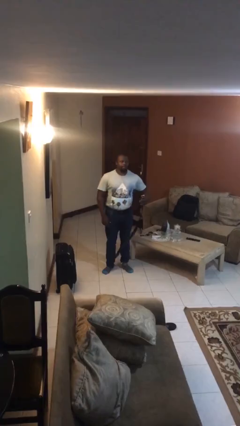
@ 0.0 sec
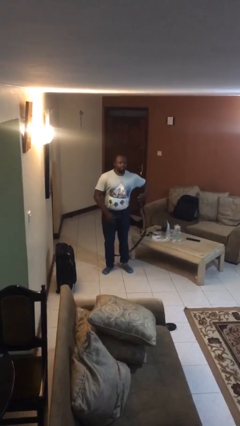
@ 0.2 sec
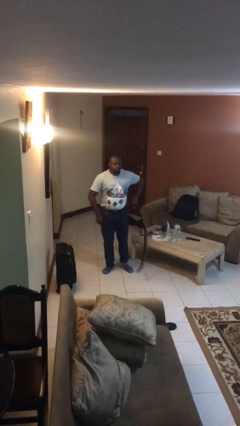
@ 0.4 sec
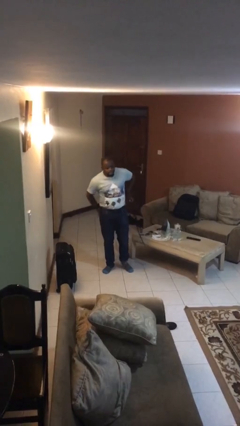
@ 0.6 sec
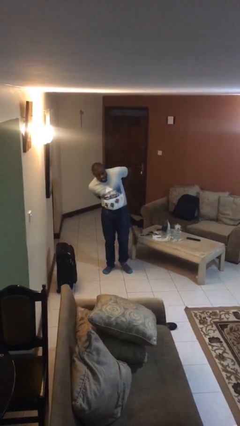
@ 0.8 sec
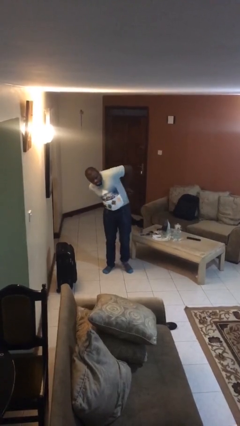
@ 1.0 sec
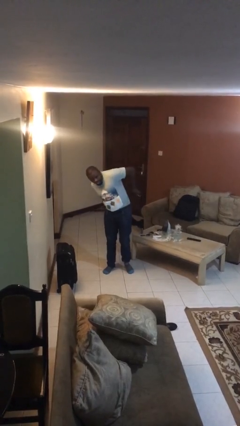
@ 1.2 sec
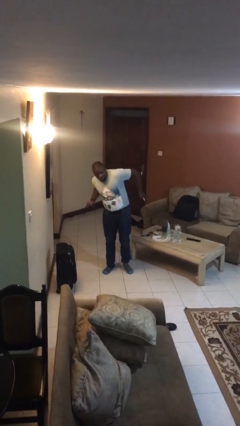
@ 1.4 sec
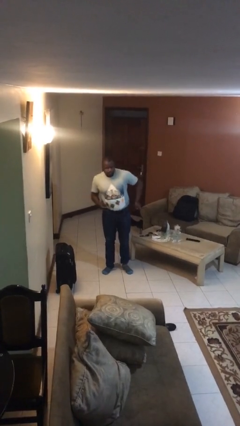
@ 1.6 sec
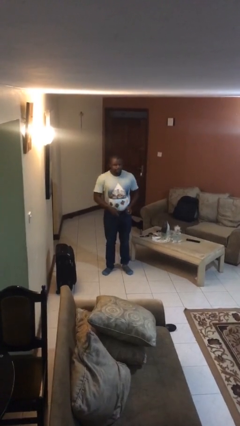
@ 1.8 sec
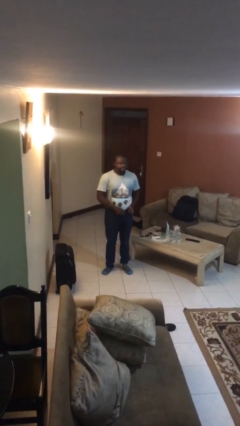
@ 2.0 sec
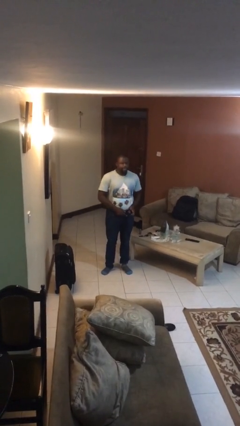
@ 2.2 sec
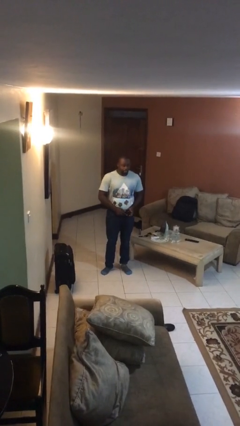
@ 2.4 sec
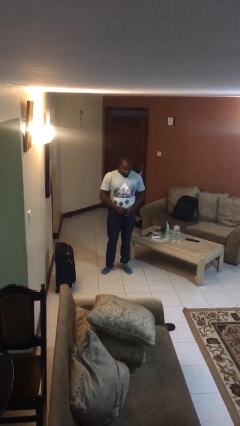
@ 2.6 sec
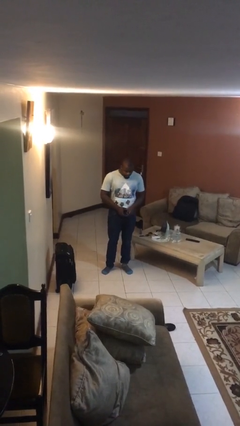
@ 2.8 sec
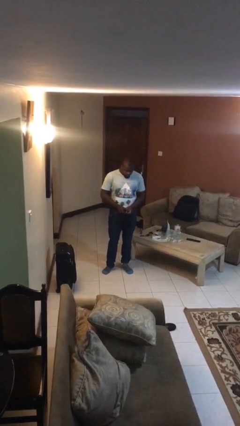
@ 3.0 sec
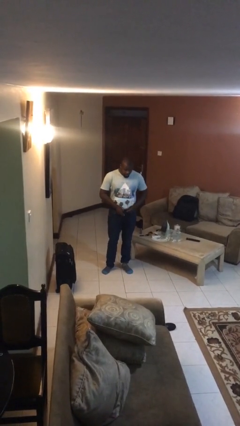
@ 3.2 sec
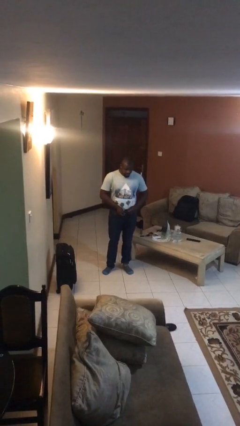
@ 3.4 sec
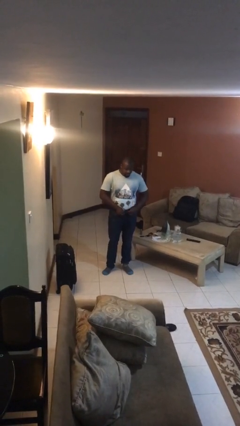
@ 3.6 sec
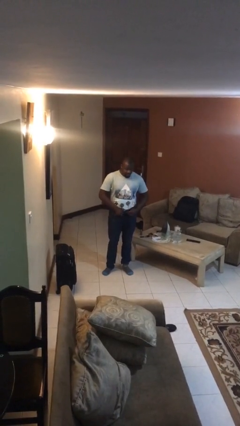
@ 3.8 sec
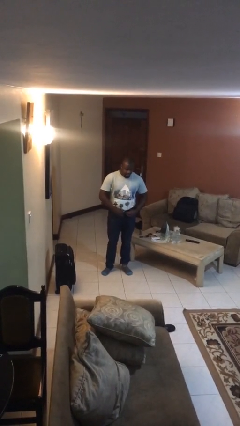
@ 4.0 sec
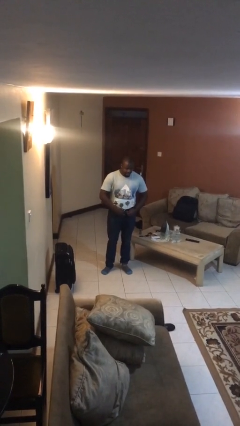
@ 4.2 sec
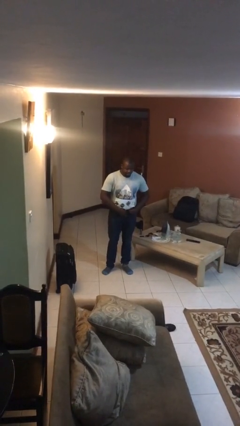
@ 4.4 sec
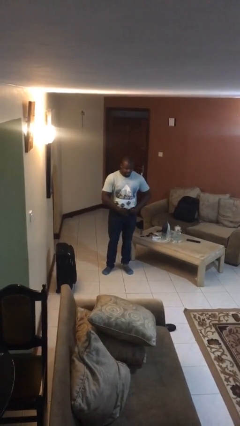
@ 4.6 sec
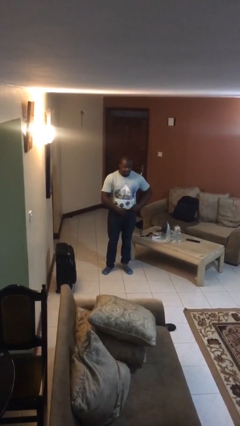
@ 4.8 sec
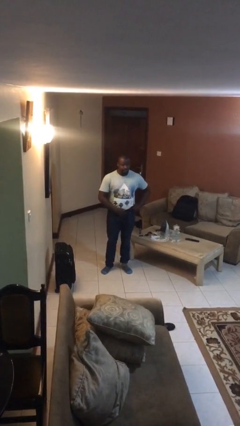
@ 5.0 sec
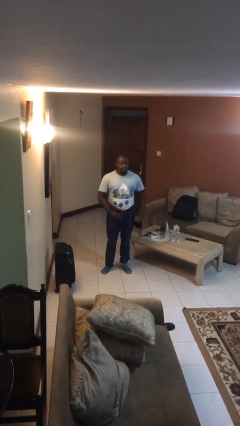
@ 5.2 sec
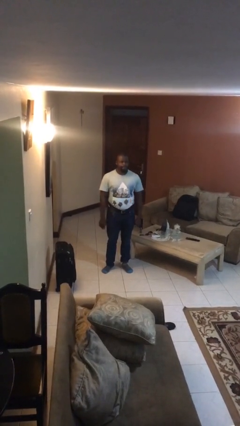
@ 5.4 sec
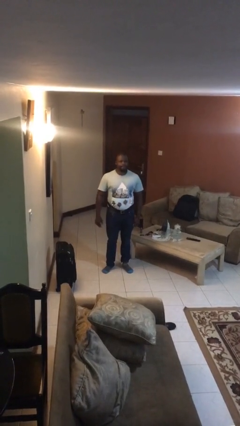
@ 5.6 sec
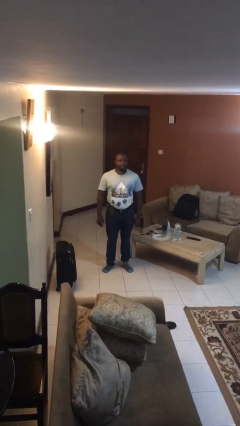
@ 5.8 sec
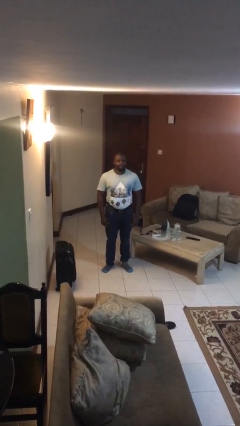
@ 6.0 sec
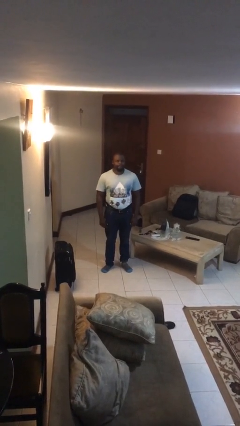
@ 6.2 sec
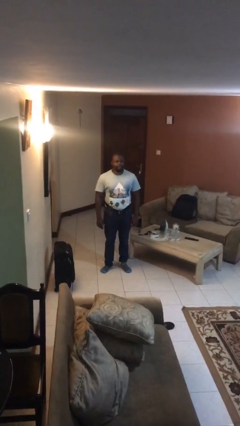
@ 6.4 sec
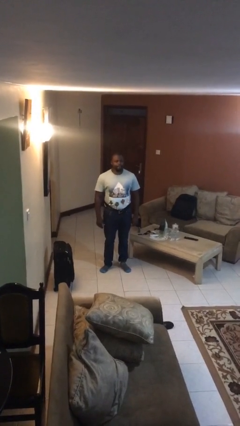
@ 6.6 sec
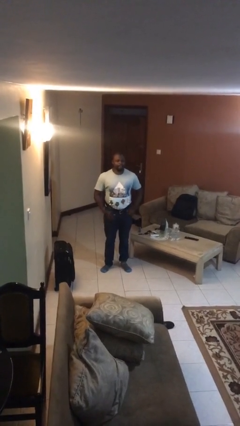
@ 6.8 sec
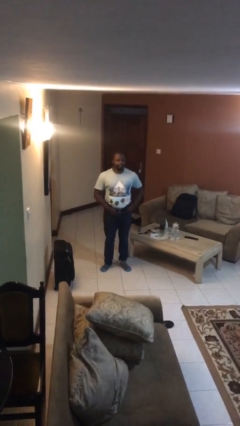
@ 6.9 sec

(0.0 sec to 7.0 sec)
person puts on belt

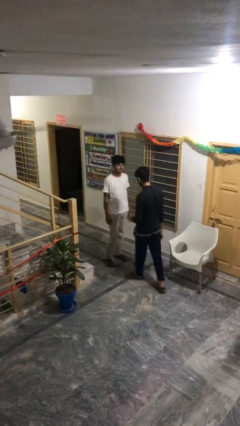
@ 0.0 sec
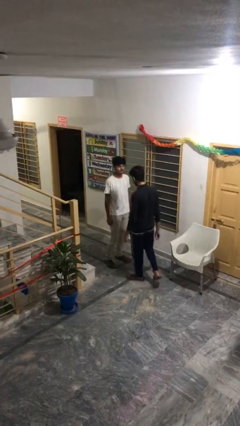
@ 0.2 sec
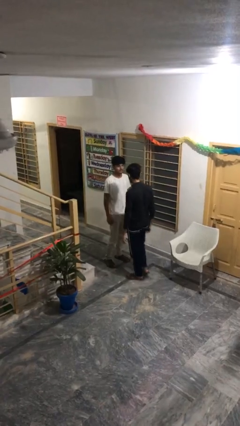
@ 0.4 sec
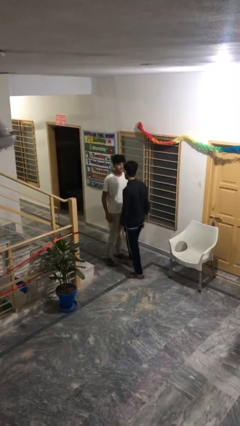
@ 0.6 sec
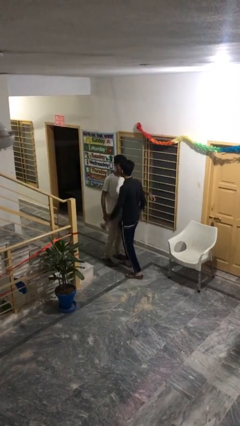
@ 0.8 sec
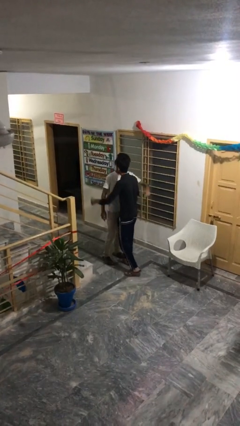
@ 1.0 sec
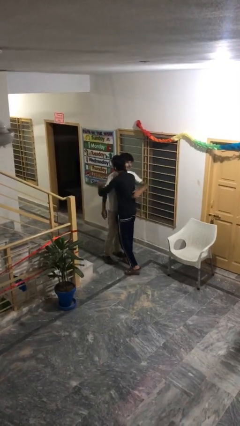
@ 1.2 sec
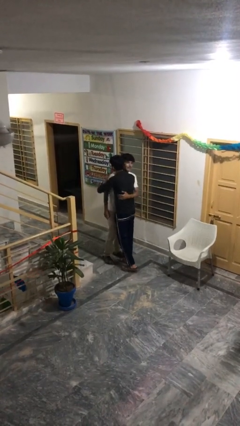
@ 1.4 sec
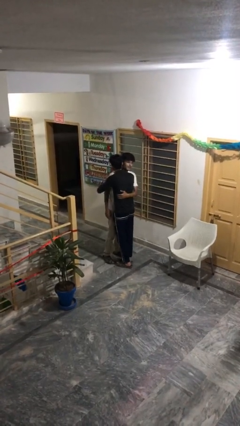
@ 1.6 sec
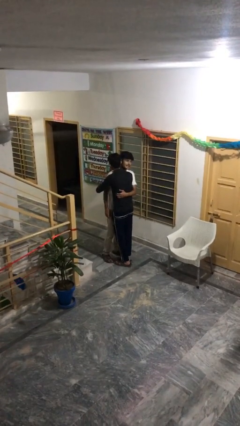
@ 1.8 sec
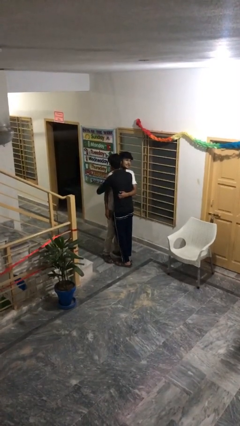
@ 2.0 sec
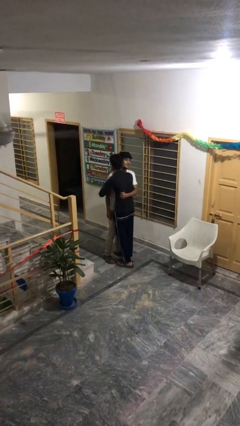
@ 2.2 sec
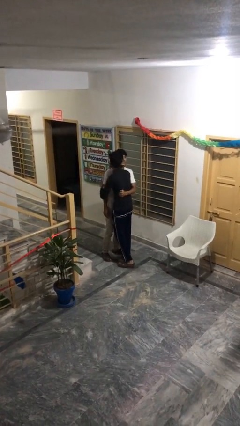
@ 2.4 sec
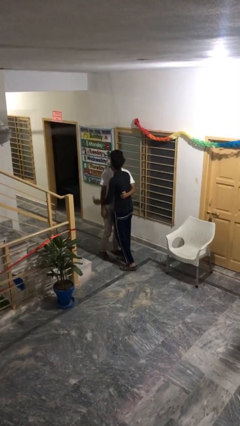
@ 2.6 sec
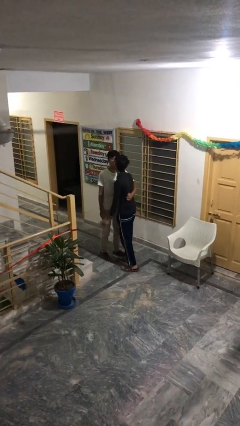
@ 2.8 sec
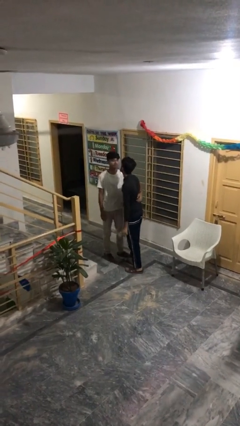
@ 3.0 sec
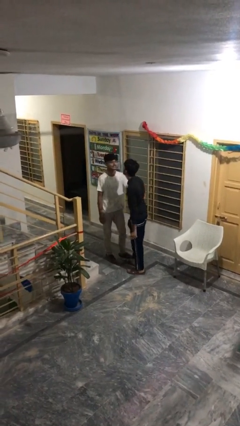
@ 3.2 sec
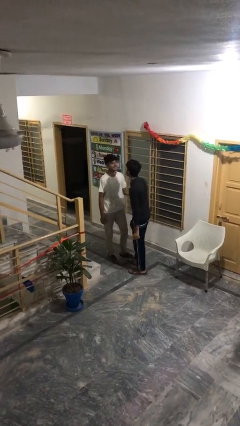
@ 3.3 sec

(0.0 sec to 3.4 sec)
person embraces person

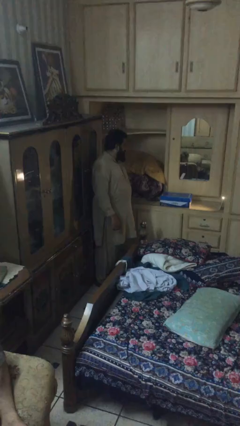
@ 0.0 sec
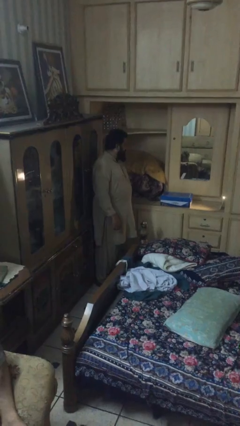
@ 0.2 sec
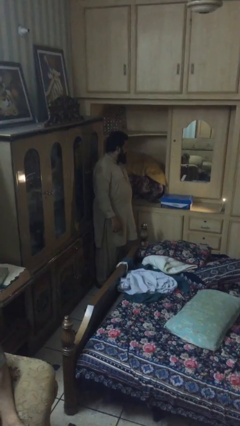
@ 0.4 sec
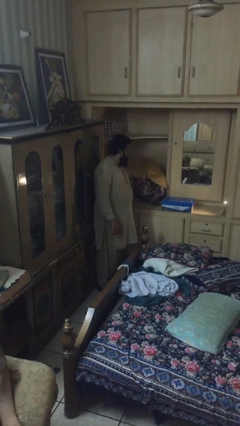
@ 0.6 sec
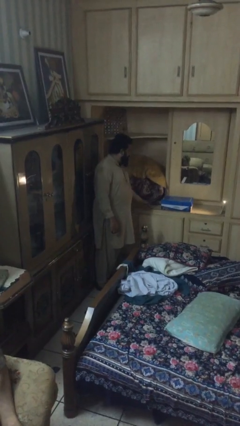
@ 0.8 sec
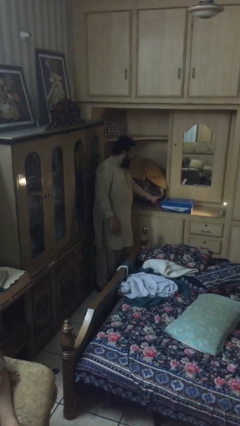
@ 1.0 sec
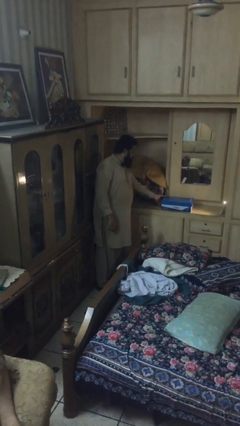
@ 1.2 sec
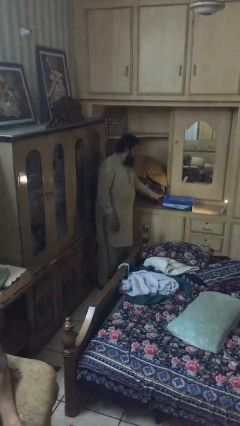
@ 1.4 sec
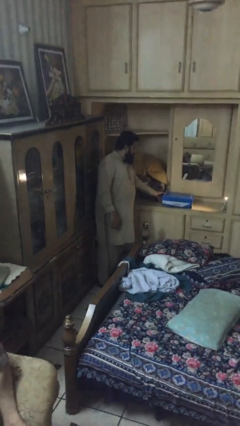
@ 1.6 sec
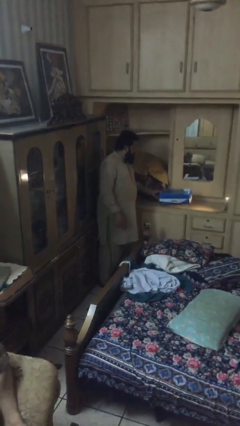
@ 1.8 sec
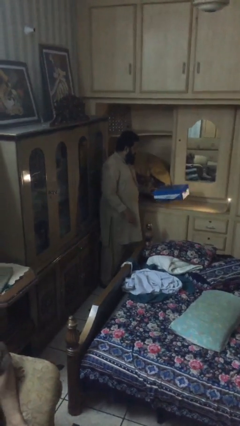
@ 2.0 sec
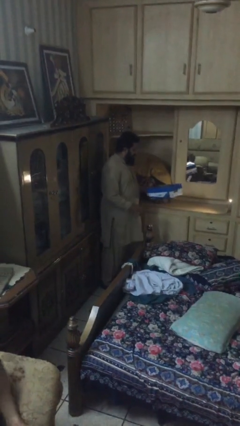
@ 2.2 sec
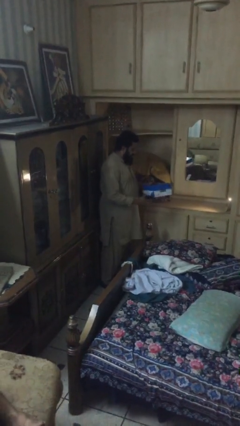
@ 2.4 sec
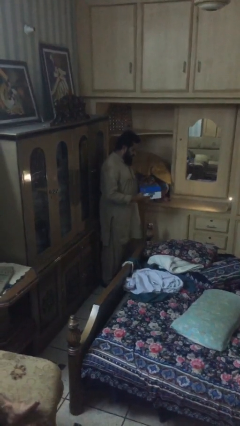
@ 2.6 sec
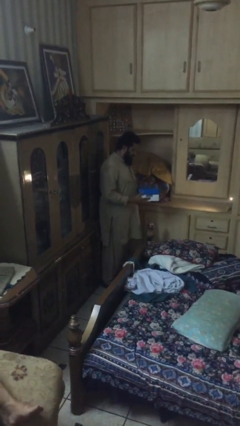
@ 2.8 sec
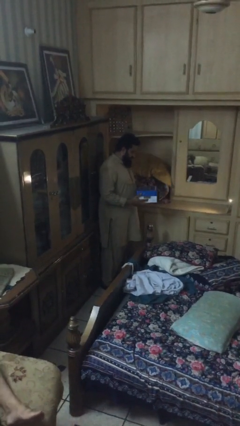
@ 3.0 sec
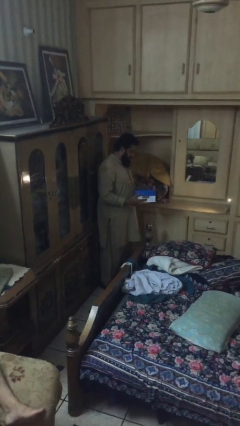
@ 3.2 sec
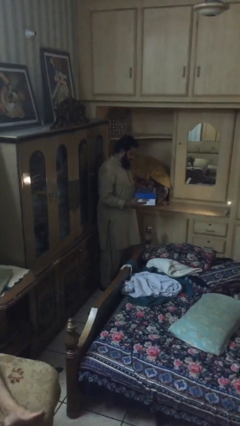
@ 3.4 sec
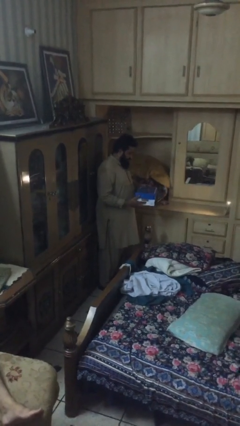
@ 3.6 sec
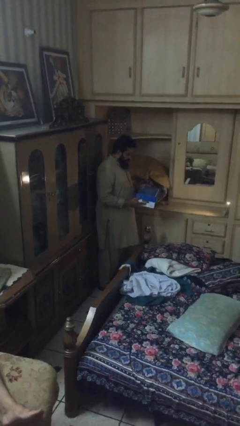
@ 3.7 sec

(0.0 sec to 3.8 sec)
person picks up object from table

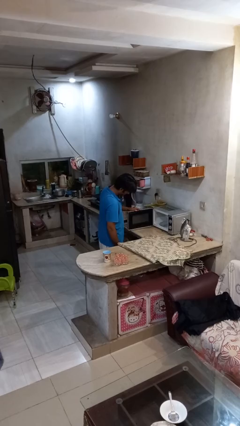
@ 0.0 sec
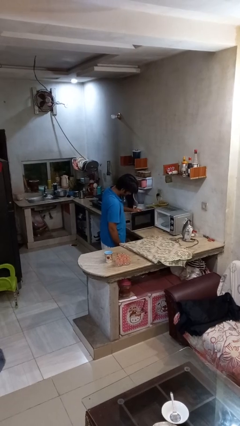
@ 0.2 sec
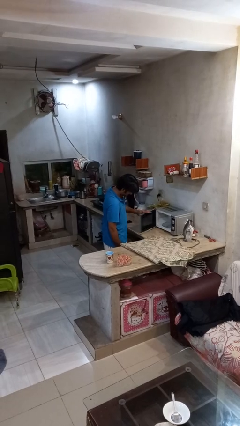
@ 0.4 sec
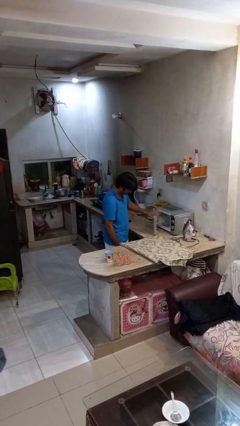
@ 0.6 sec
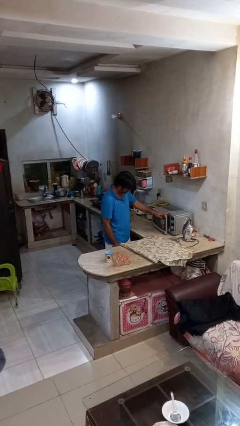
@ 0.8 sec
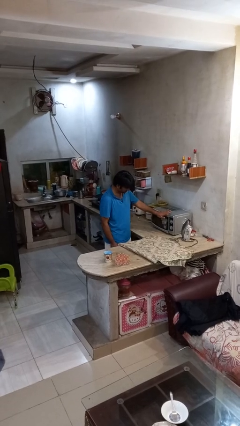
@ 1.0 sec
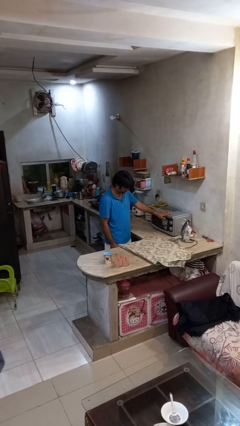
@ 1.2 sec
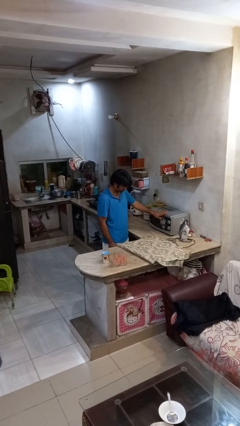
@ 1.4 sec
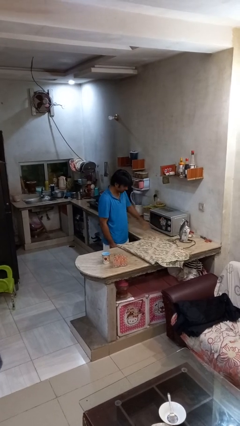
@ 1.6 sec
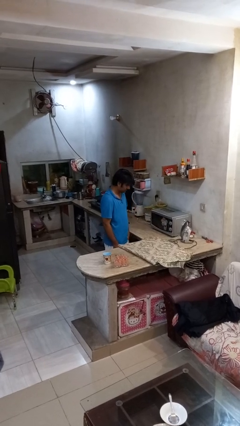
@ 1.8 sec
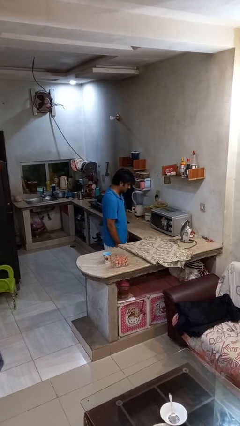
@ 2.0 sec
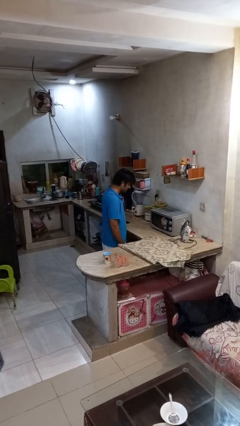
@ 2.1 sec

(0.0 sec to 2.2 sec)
person closes microwave

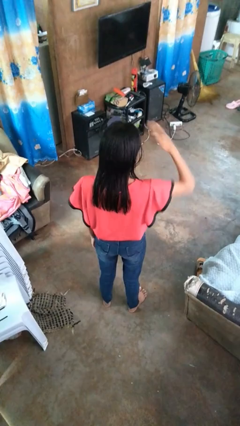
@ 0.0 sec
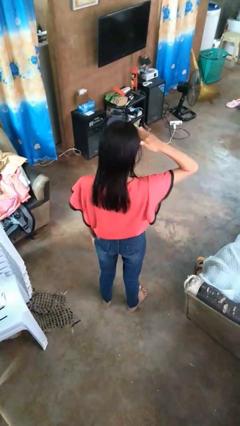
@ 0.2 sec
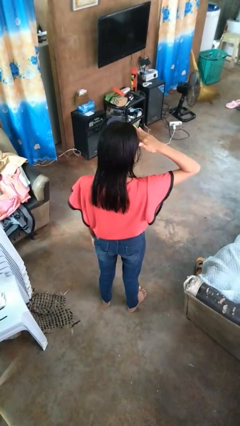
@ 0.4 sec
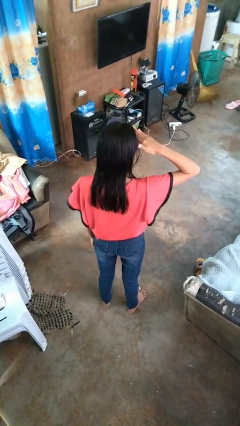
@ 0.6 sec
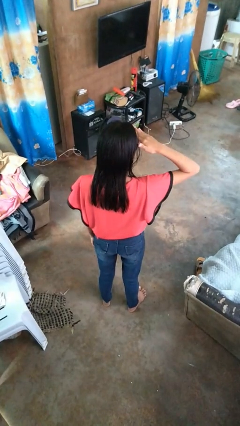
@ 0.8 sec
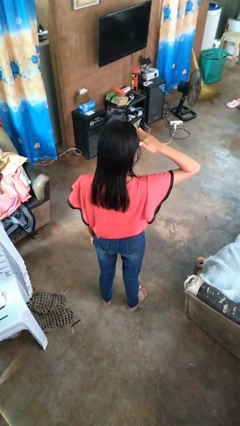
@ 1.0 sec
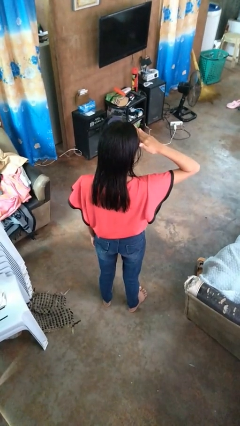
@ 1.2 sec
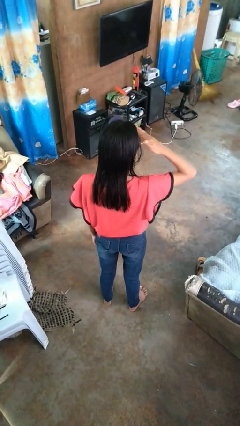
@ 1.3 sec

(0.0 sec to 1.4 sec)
person salutes
